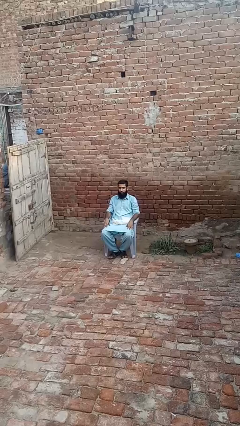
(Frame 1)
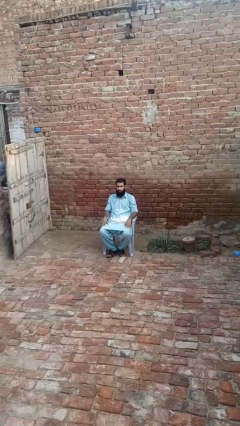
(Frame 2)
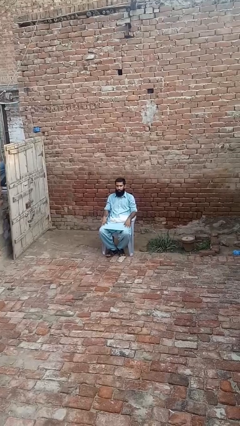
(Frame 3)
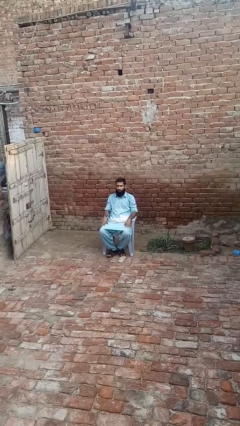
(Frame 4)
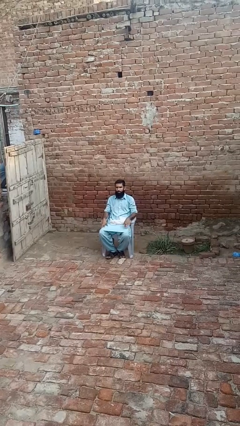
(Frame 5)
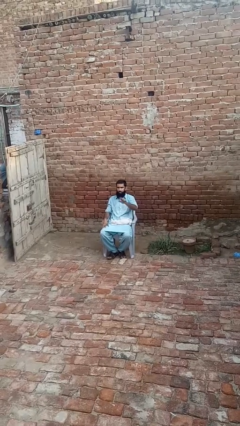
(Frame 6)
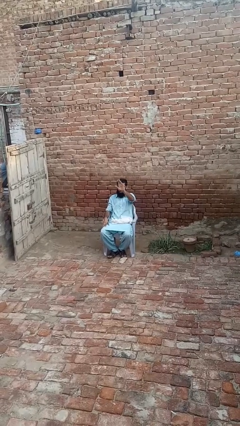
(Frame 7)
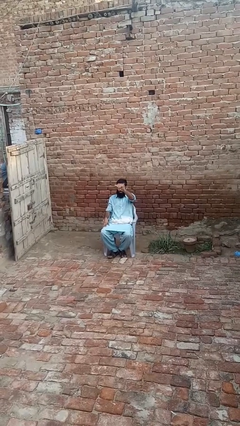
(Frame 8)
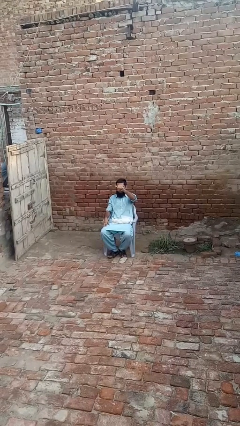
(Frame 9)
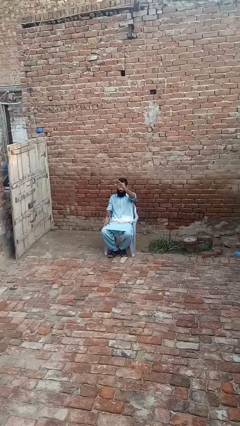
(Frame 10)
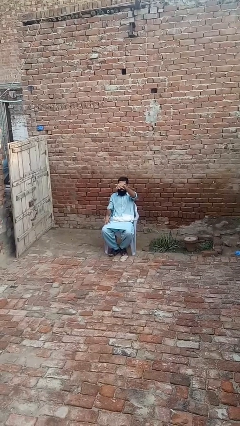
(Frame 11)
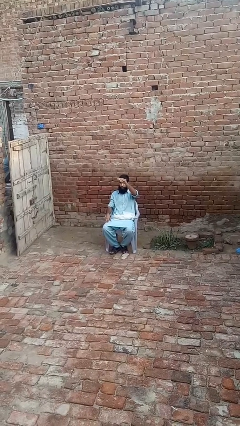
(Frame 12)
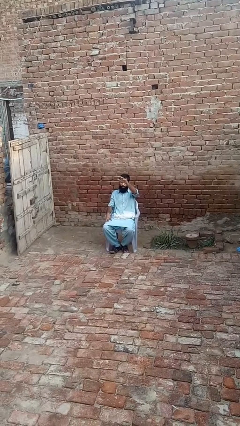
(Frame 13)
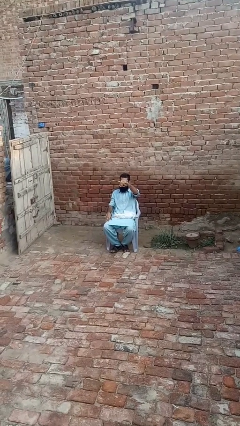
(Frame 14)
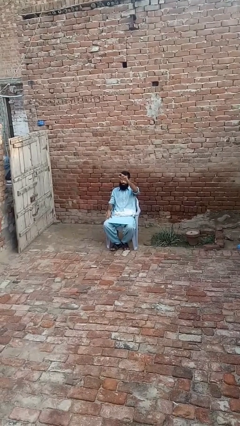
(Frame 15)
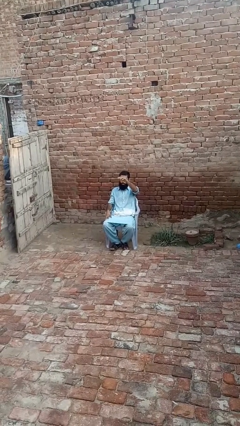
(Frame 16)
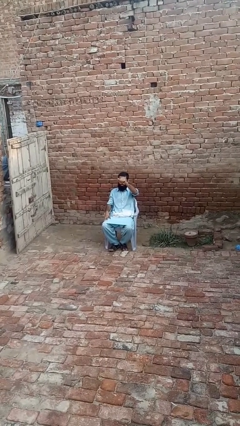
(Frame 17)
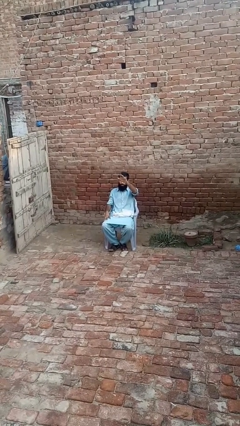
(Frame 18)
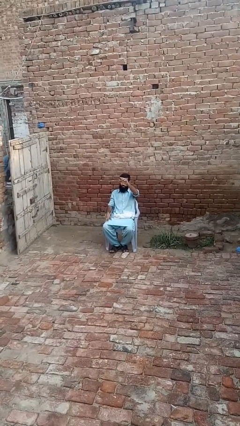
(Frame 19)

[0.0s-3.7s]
person gestures come here

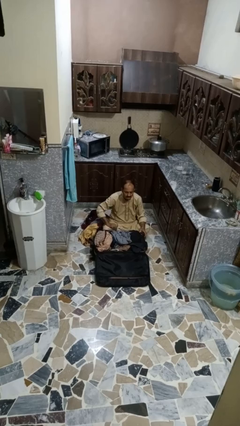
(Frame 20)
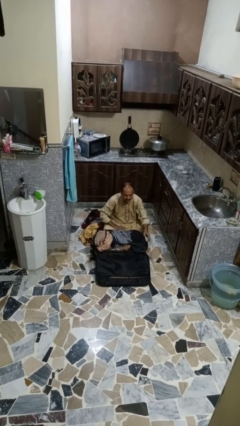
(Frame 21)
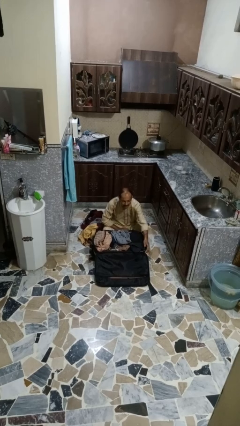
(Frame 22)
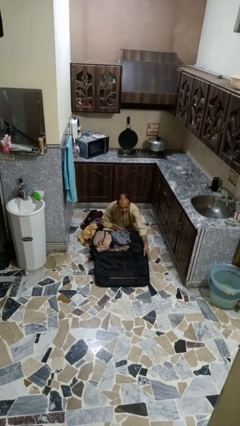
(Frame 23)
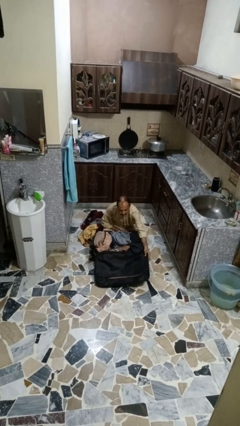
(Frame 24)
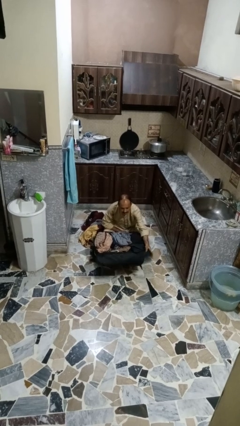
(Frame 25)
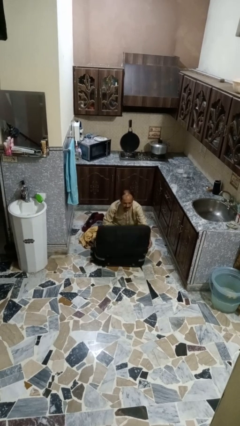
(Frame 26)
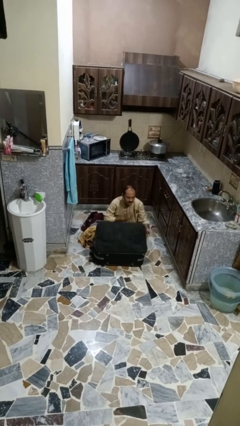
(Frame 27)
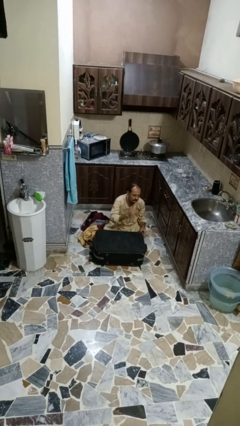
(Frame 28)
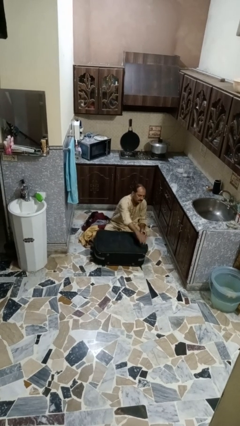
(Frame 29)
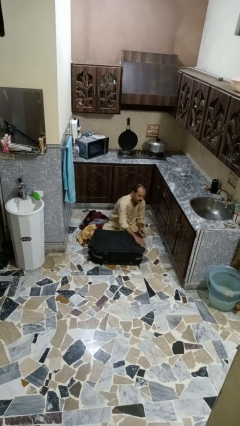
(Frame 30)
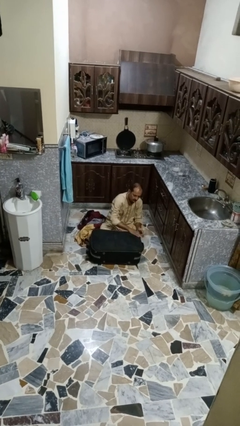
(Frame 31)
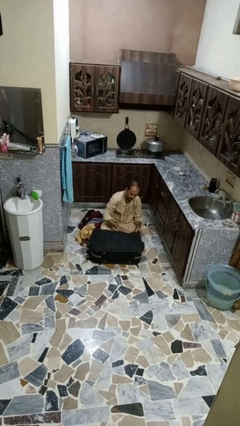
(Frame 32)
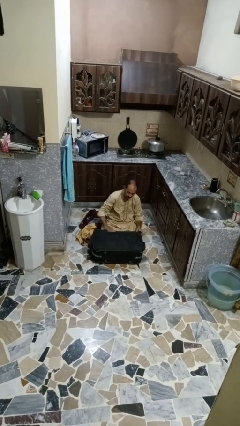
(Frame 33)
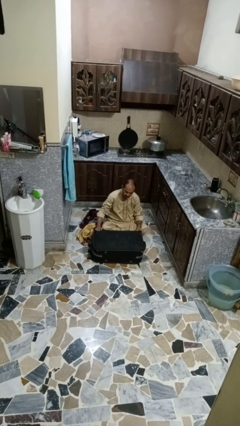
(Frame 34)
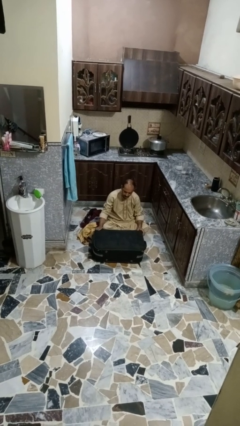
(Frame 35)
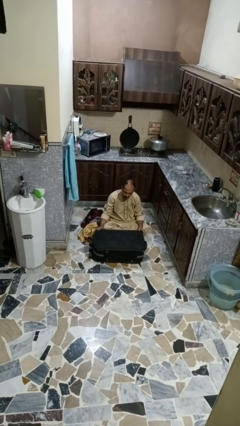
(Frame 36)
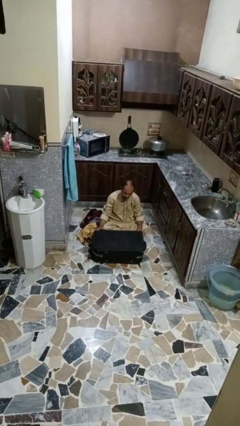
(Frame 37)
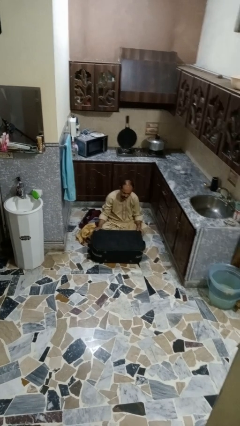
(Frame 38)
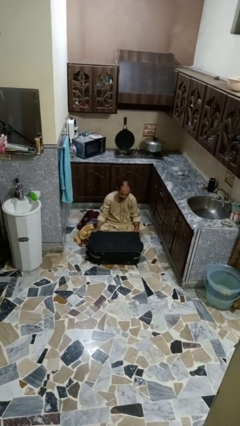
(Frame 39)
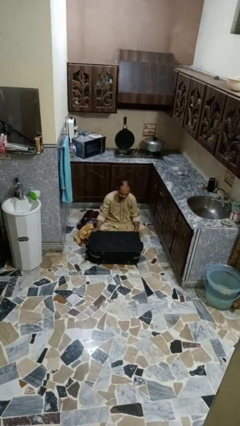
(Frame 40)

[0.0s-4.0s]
person closes suitcase

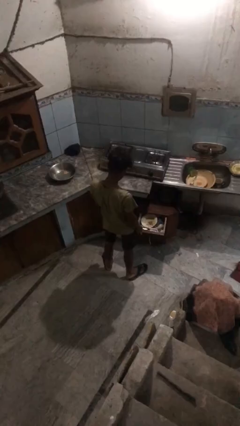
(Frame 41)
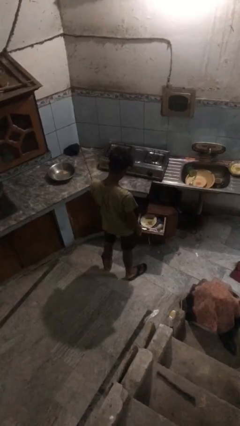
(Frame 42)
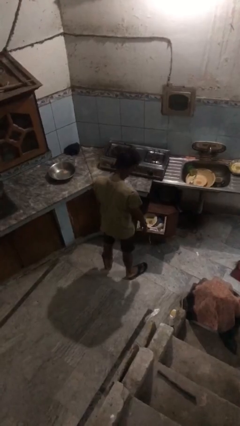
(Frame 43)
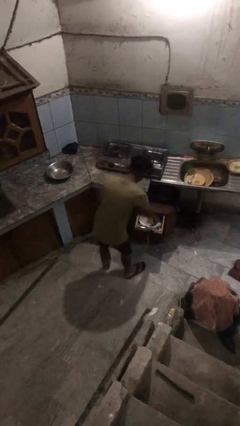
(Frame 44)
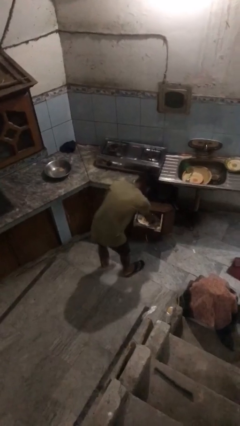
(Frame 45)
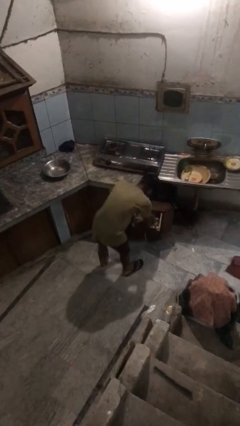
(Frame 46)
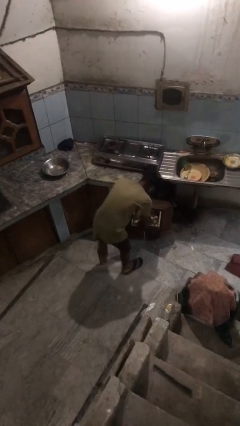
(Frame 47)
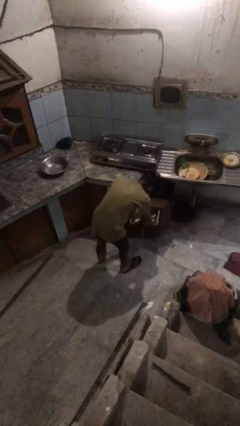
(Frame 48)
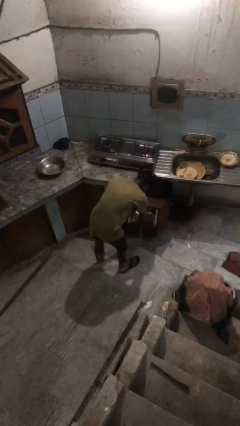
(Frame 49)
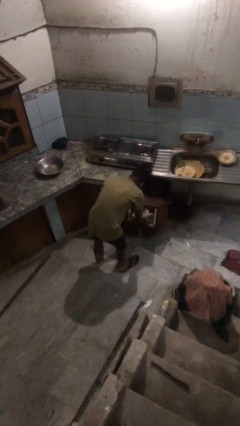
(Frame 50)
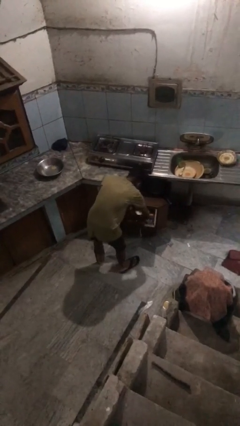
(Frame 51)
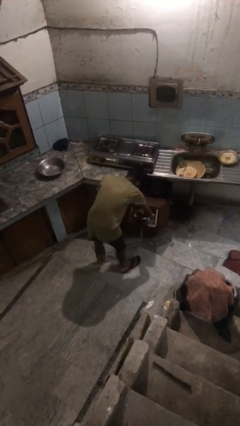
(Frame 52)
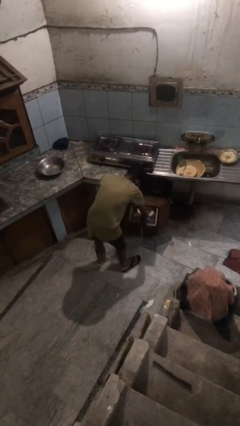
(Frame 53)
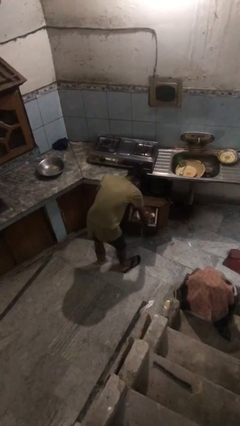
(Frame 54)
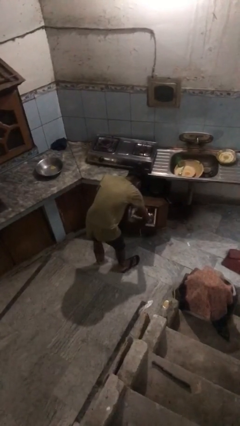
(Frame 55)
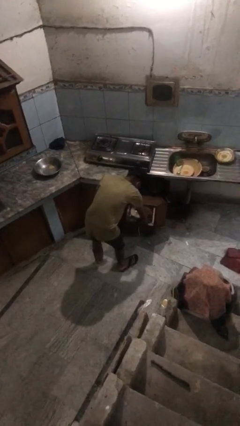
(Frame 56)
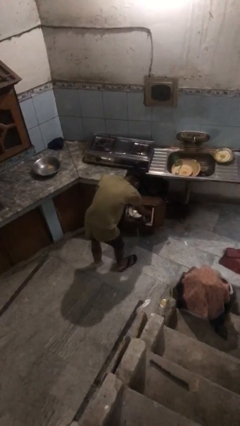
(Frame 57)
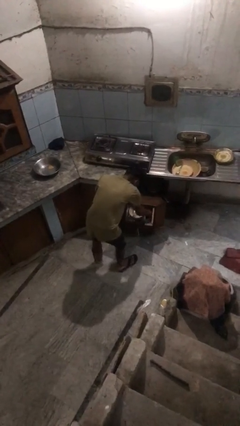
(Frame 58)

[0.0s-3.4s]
person searches in kitchen drawer

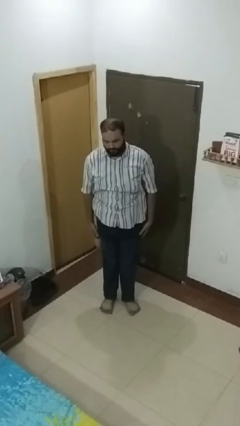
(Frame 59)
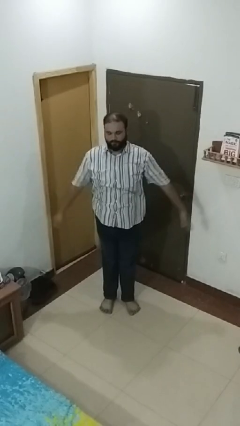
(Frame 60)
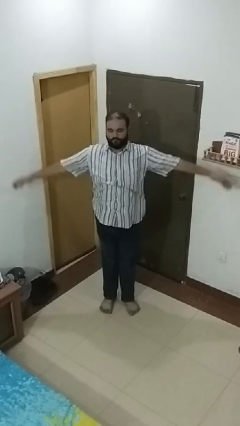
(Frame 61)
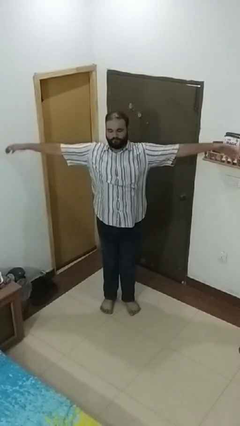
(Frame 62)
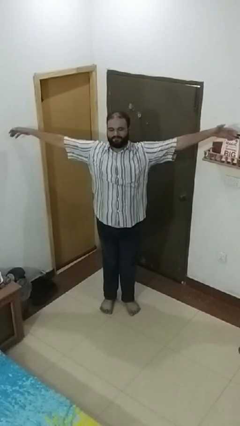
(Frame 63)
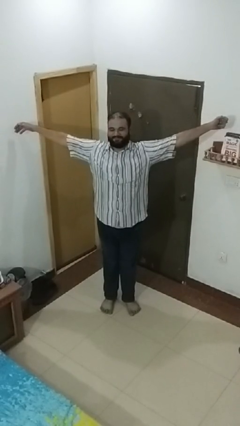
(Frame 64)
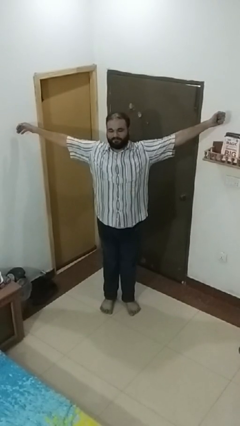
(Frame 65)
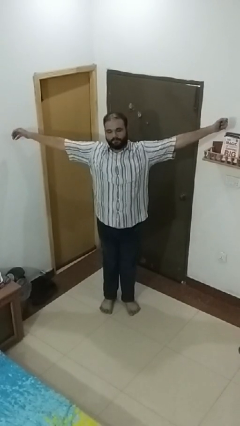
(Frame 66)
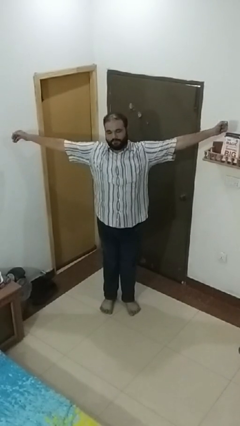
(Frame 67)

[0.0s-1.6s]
person stretches arms to side

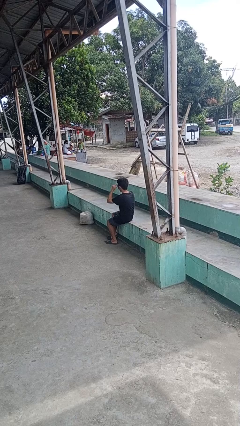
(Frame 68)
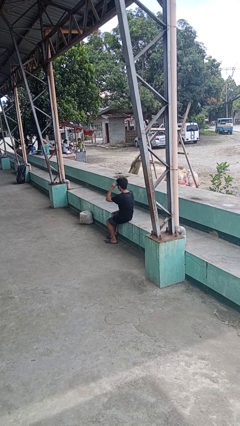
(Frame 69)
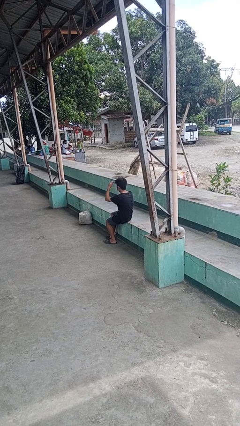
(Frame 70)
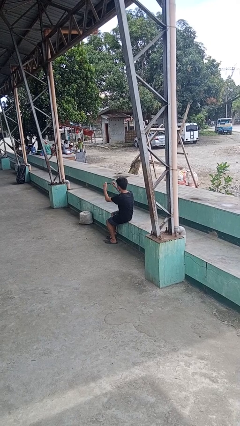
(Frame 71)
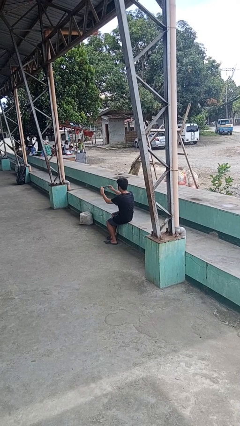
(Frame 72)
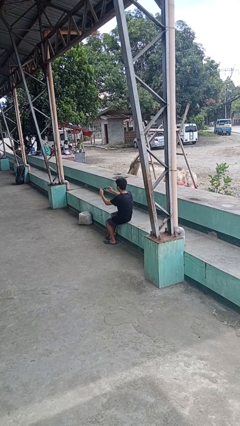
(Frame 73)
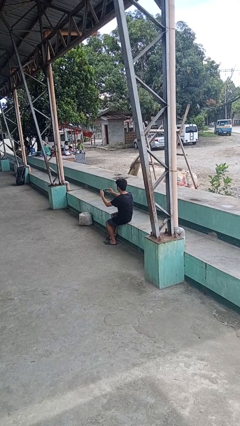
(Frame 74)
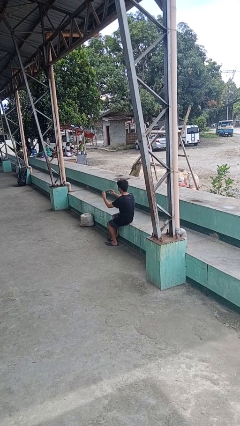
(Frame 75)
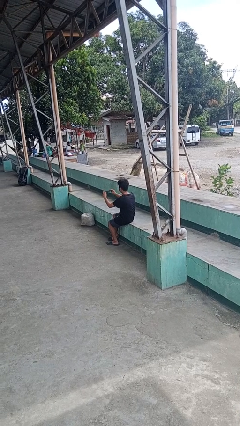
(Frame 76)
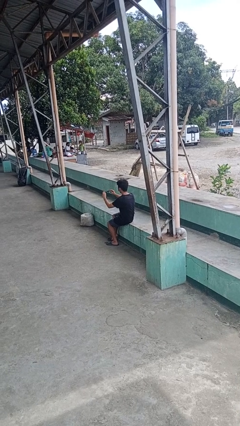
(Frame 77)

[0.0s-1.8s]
person takes off sunglasses

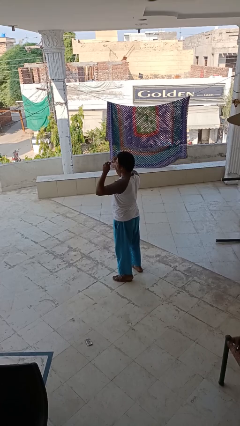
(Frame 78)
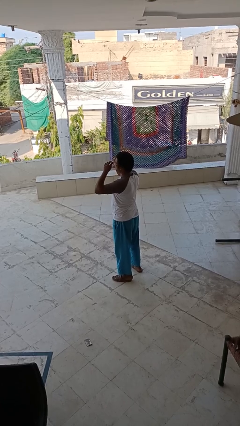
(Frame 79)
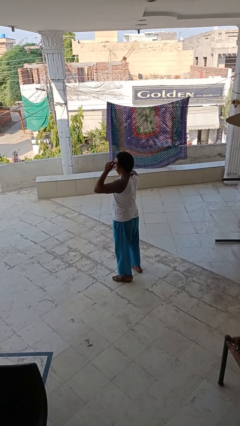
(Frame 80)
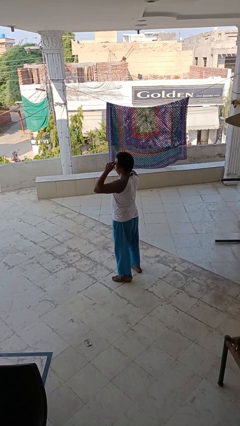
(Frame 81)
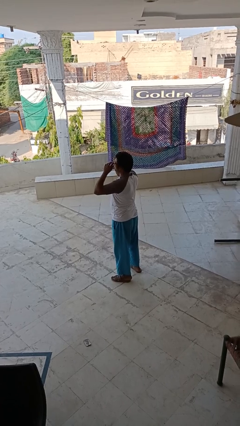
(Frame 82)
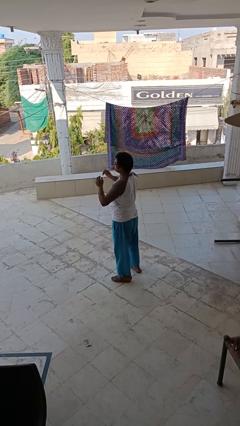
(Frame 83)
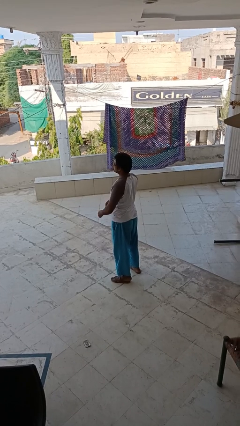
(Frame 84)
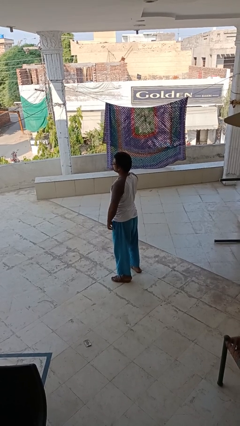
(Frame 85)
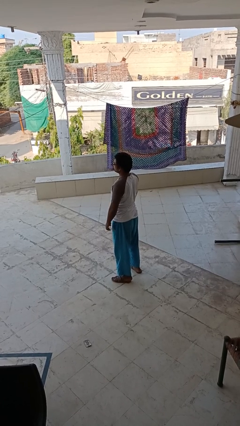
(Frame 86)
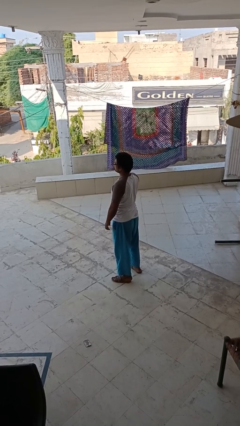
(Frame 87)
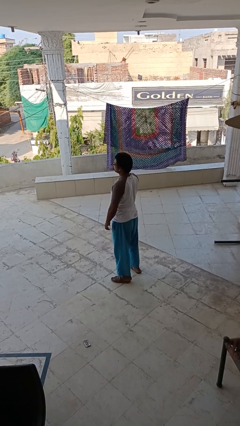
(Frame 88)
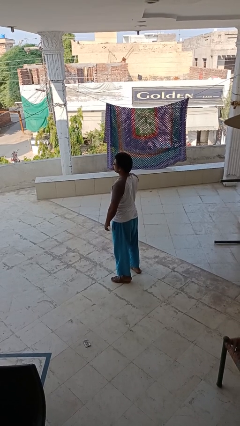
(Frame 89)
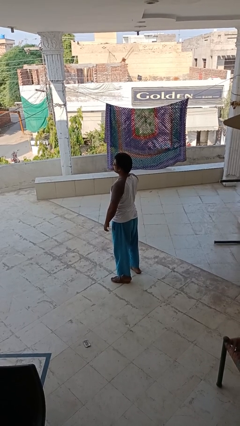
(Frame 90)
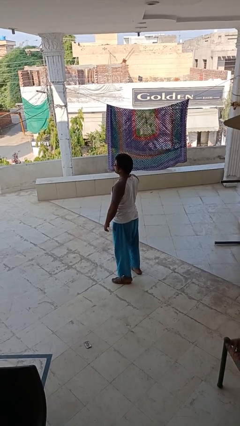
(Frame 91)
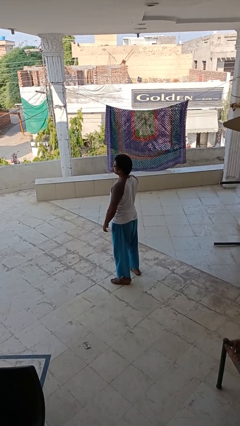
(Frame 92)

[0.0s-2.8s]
person puts on glasses

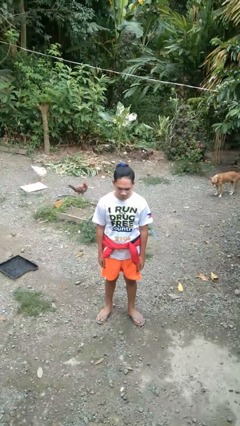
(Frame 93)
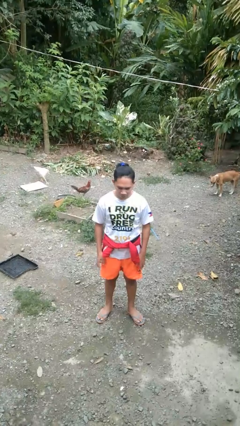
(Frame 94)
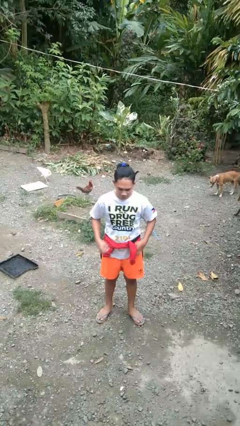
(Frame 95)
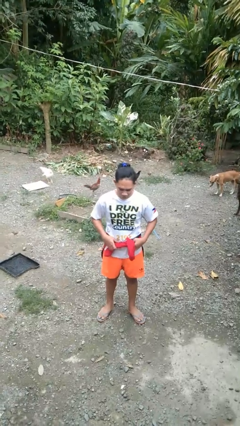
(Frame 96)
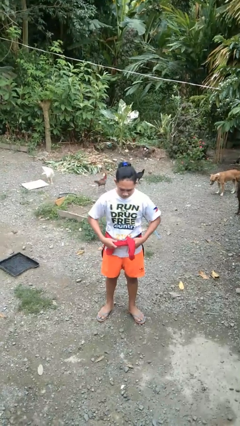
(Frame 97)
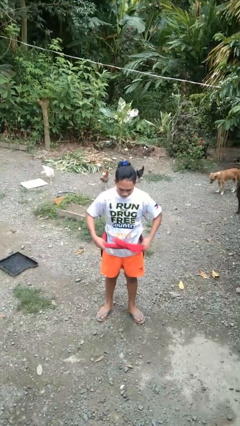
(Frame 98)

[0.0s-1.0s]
person unties jacket around waist
